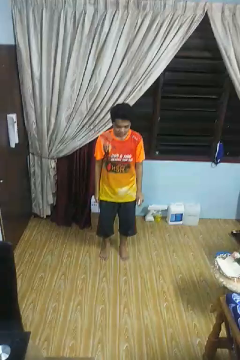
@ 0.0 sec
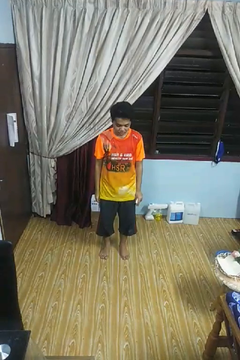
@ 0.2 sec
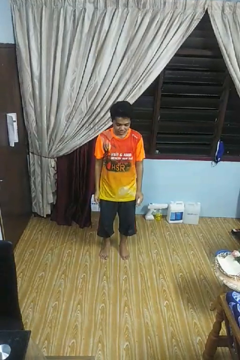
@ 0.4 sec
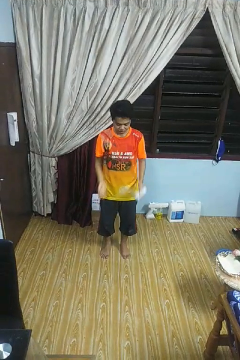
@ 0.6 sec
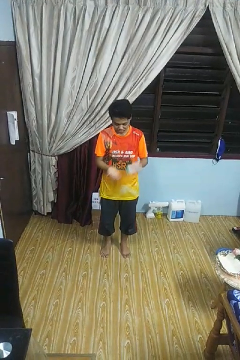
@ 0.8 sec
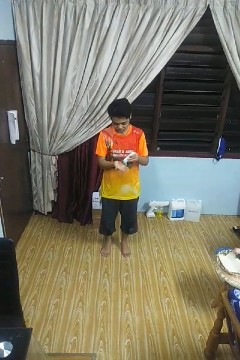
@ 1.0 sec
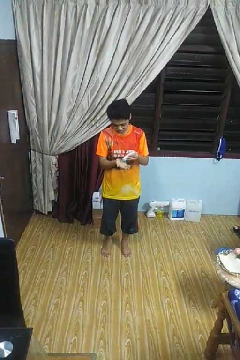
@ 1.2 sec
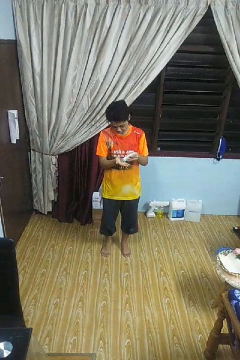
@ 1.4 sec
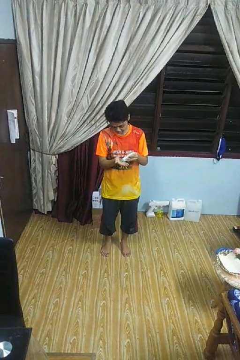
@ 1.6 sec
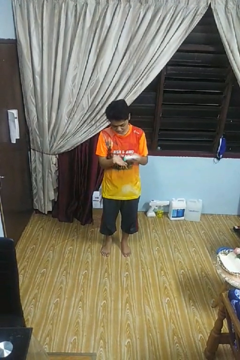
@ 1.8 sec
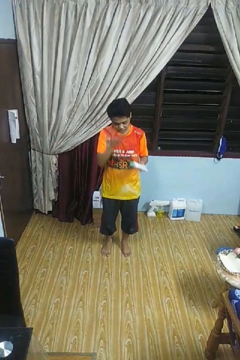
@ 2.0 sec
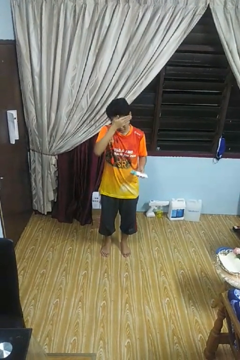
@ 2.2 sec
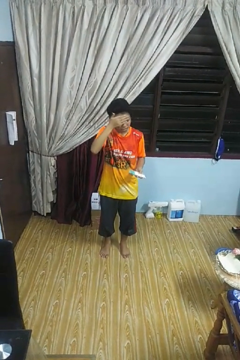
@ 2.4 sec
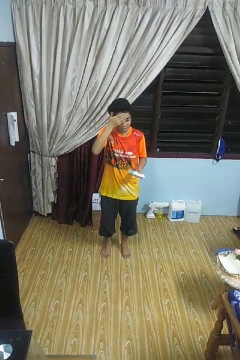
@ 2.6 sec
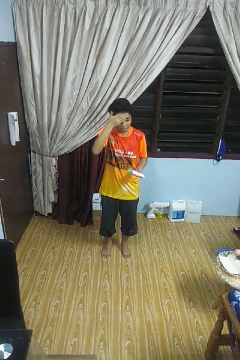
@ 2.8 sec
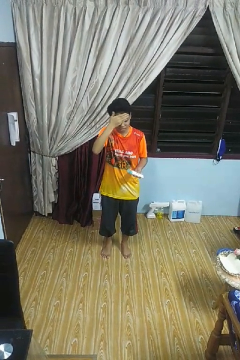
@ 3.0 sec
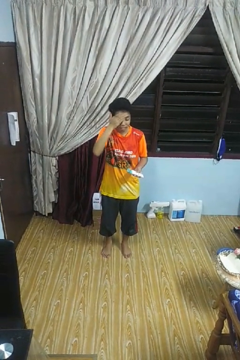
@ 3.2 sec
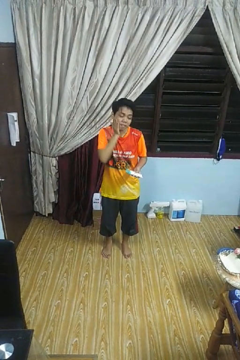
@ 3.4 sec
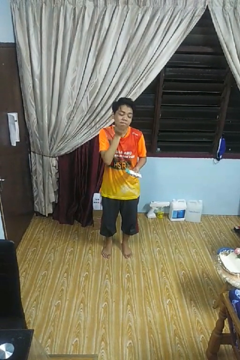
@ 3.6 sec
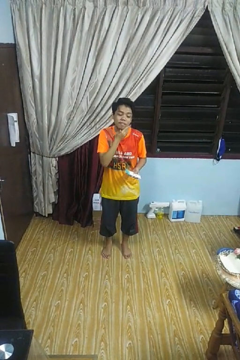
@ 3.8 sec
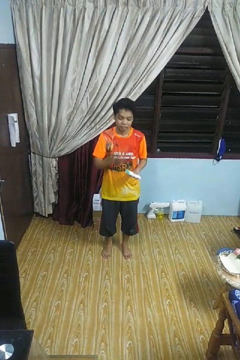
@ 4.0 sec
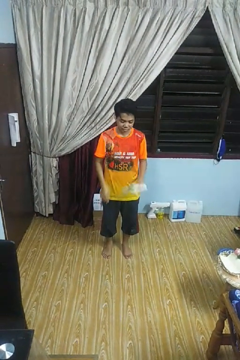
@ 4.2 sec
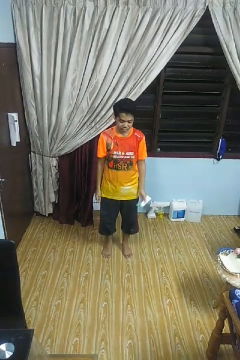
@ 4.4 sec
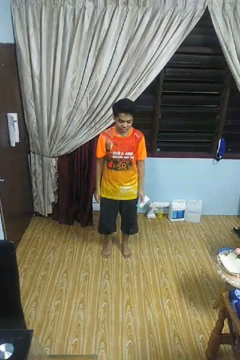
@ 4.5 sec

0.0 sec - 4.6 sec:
person applies facial moisturizer

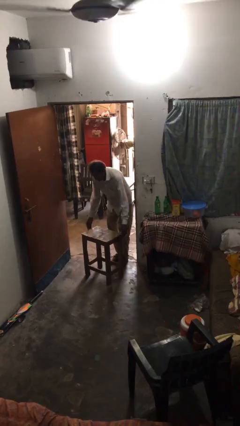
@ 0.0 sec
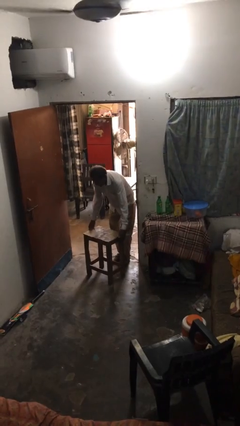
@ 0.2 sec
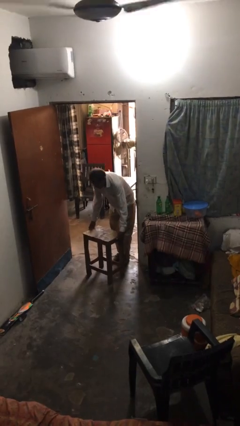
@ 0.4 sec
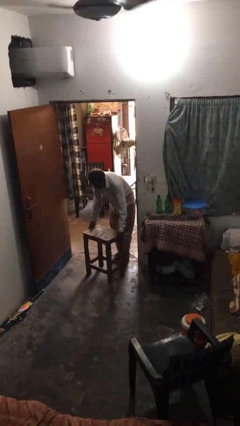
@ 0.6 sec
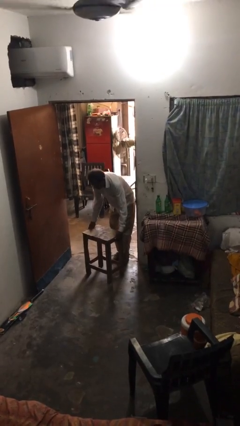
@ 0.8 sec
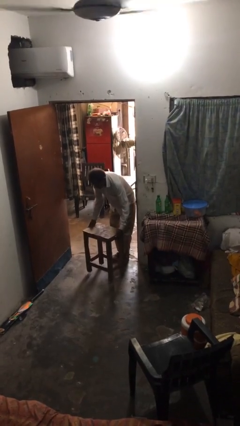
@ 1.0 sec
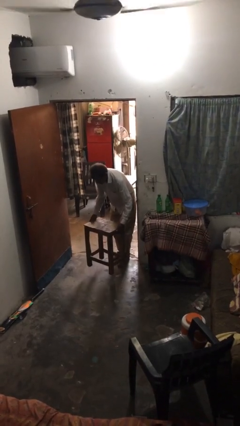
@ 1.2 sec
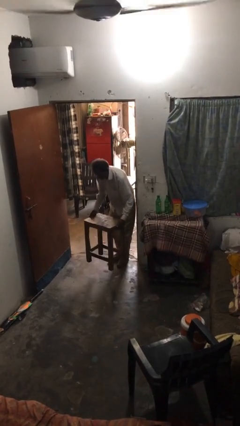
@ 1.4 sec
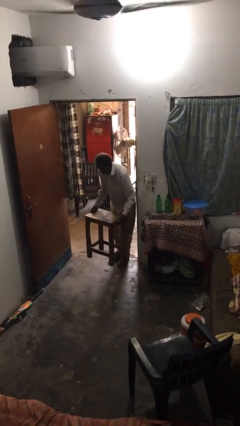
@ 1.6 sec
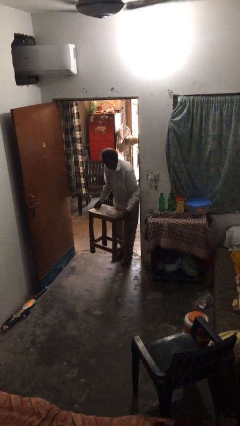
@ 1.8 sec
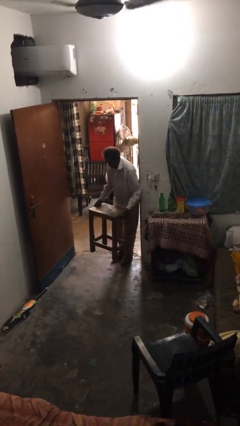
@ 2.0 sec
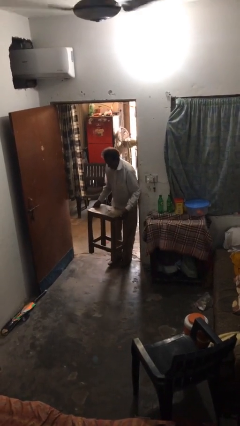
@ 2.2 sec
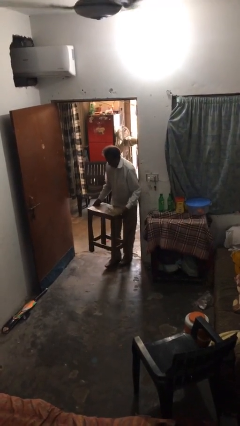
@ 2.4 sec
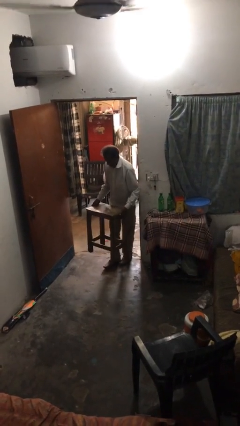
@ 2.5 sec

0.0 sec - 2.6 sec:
person picks up object from floor

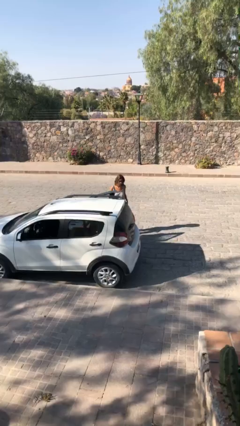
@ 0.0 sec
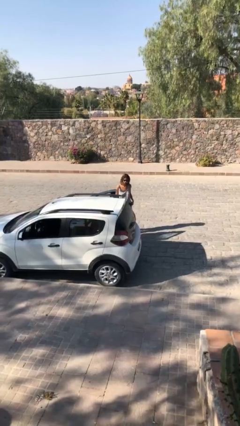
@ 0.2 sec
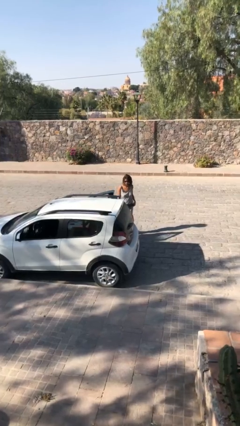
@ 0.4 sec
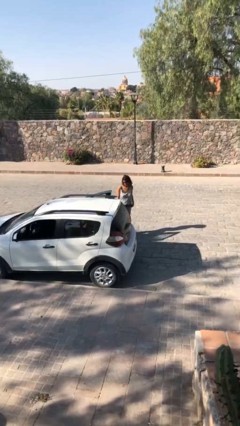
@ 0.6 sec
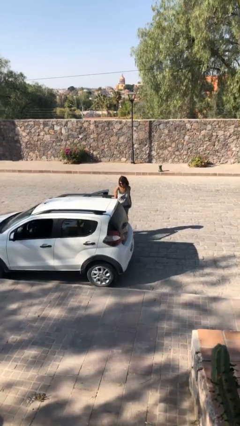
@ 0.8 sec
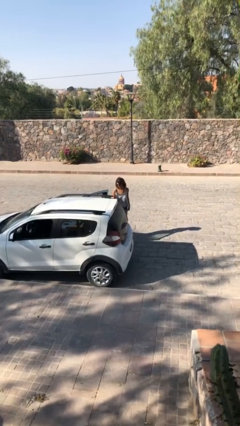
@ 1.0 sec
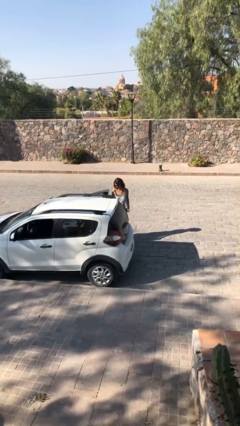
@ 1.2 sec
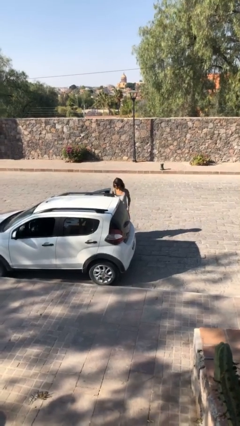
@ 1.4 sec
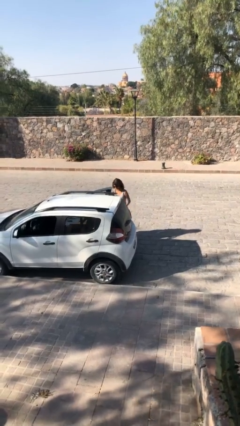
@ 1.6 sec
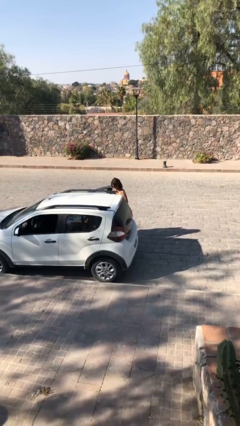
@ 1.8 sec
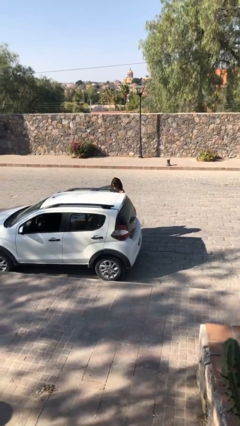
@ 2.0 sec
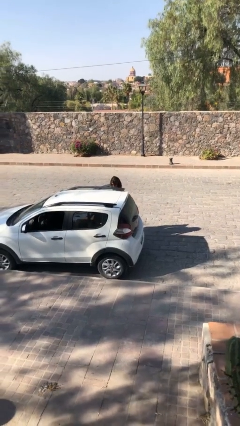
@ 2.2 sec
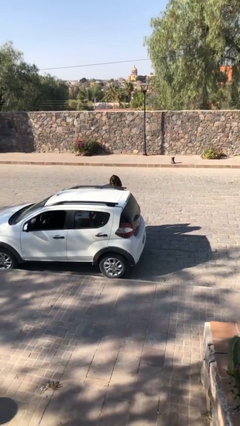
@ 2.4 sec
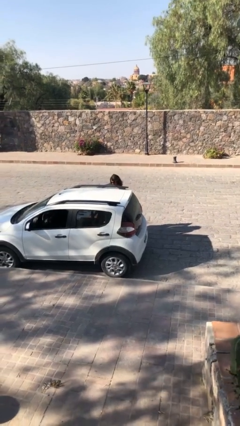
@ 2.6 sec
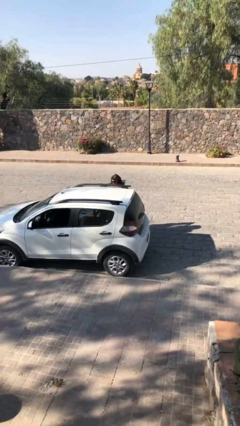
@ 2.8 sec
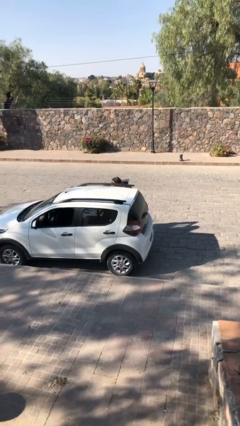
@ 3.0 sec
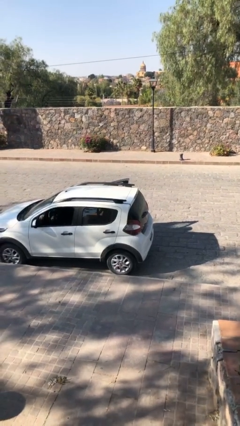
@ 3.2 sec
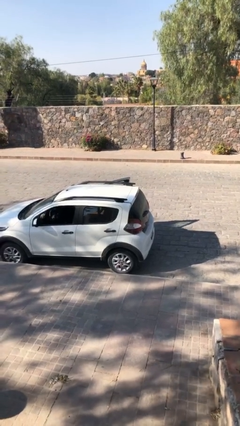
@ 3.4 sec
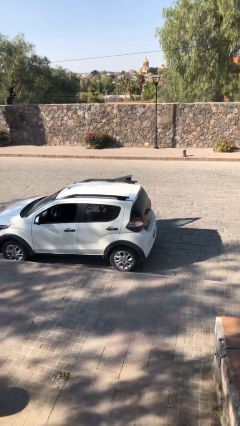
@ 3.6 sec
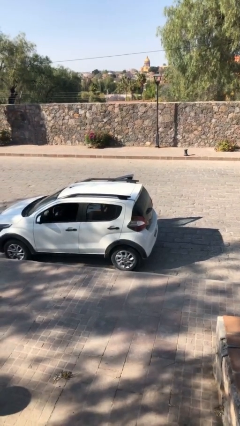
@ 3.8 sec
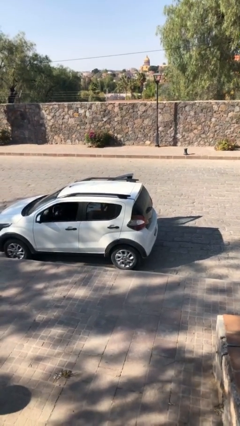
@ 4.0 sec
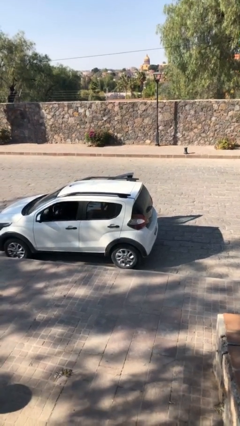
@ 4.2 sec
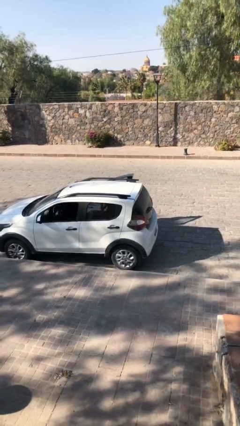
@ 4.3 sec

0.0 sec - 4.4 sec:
person enters car

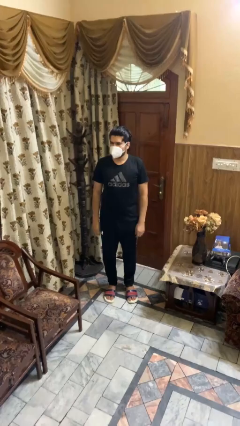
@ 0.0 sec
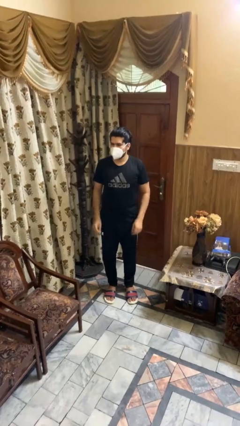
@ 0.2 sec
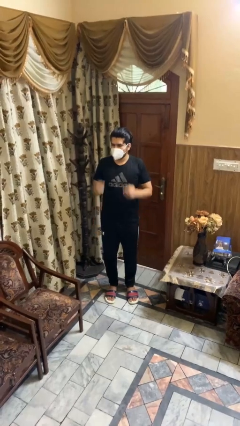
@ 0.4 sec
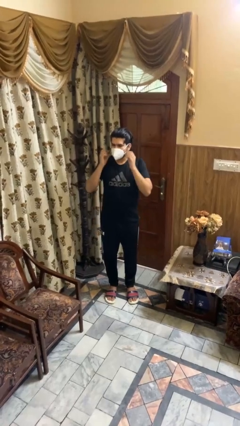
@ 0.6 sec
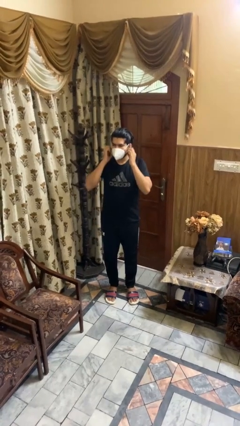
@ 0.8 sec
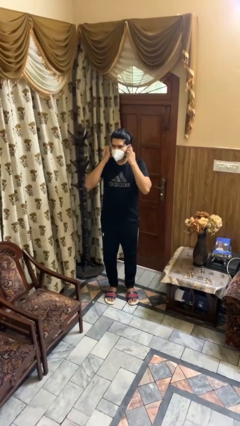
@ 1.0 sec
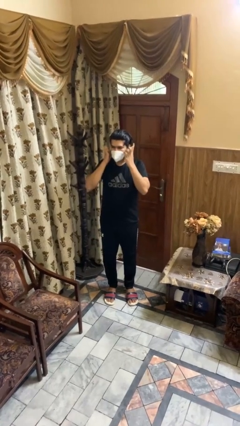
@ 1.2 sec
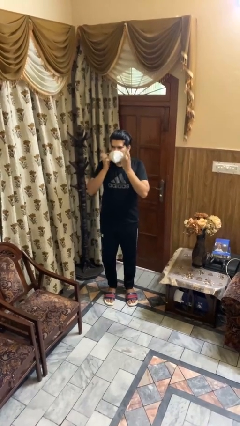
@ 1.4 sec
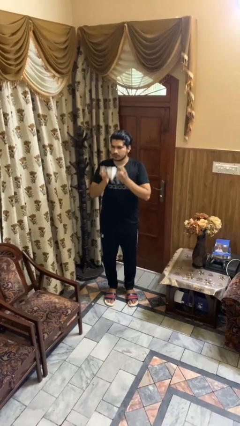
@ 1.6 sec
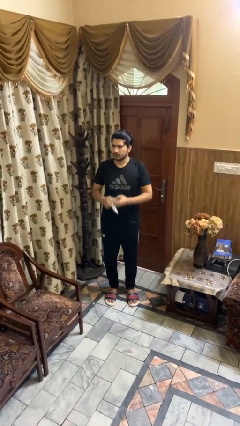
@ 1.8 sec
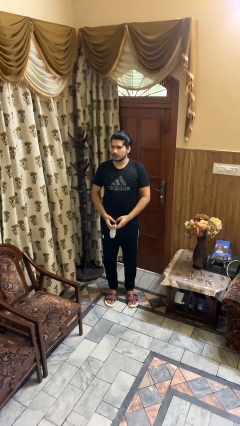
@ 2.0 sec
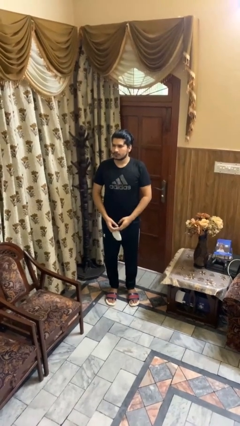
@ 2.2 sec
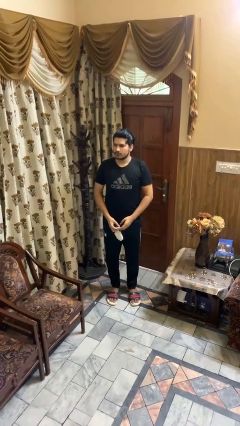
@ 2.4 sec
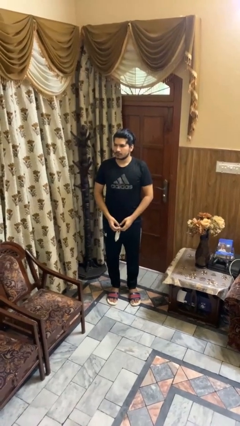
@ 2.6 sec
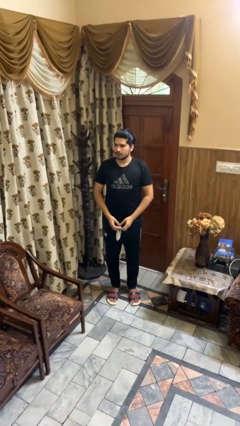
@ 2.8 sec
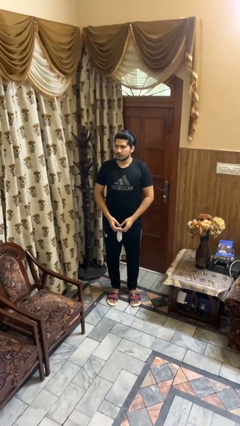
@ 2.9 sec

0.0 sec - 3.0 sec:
person takes off facemask

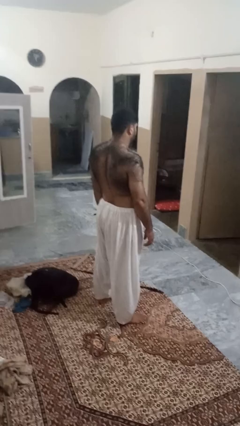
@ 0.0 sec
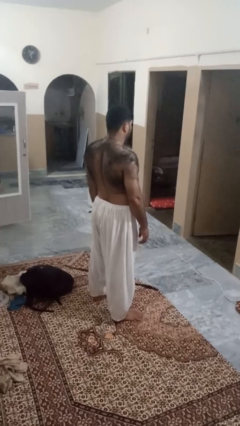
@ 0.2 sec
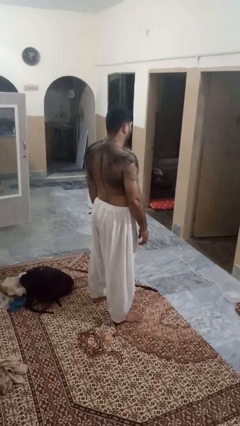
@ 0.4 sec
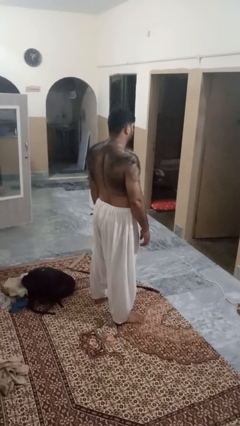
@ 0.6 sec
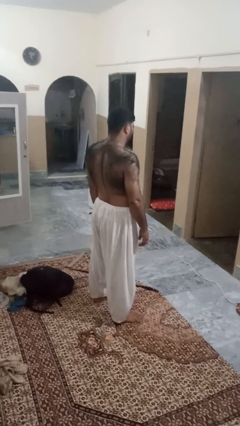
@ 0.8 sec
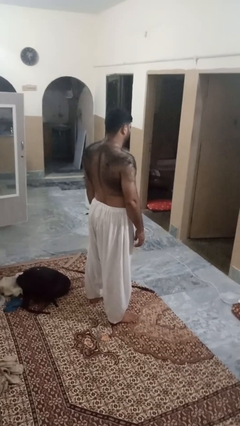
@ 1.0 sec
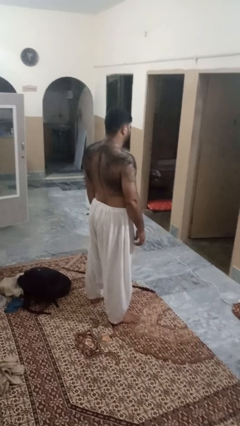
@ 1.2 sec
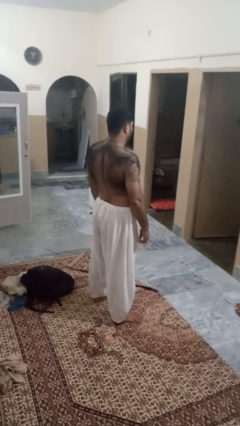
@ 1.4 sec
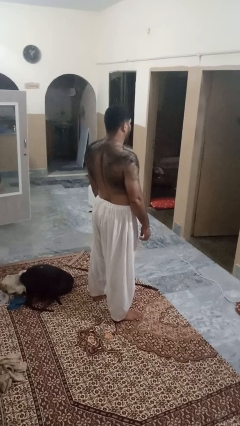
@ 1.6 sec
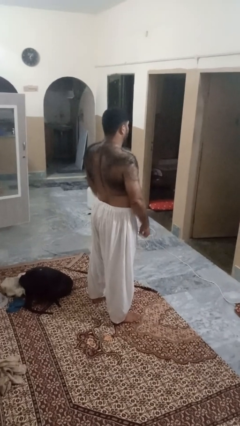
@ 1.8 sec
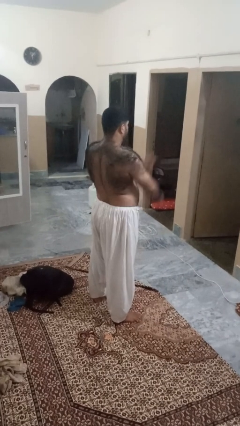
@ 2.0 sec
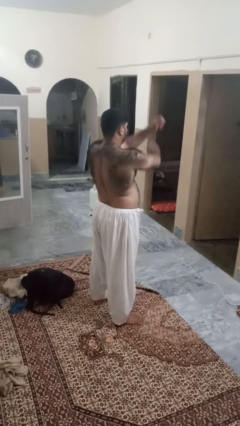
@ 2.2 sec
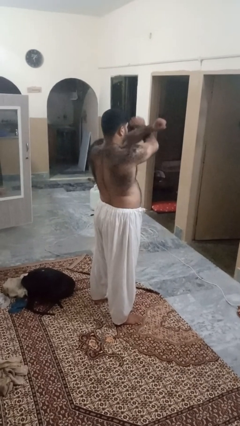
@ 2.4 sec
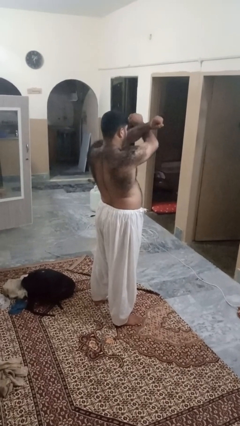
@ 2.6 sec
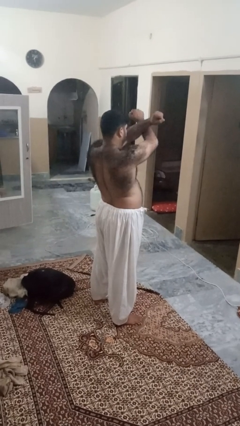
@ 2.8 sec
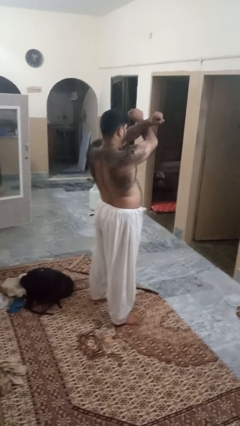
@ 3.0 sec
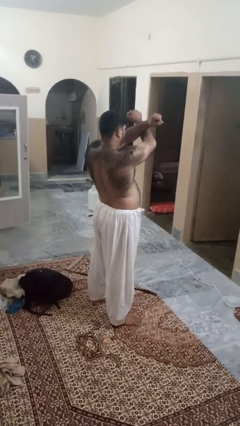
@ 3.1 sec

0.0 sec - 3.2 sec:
person gestures arms x

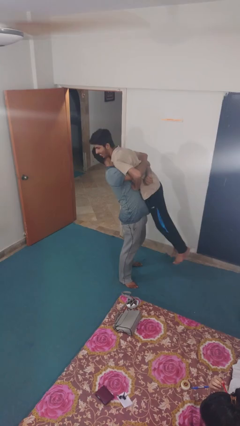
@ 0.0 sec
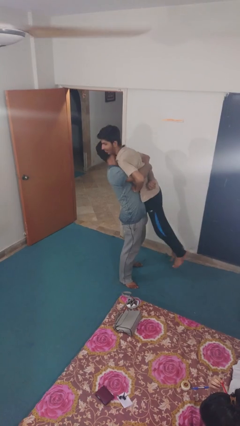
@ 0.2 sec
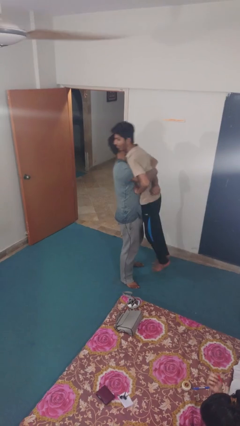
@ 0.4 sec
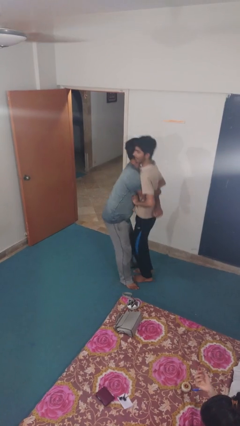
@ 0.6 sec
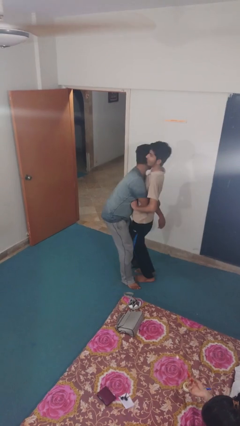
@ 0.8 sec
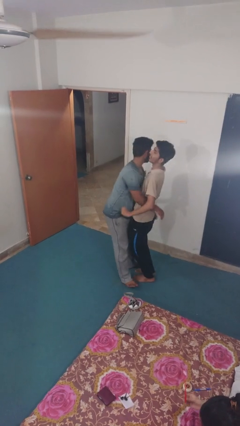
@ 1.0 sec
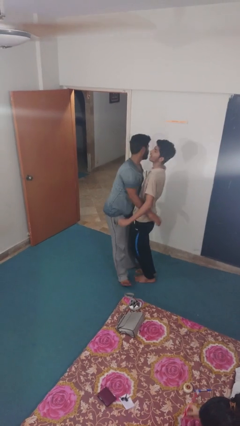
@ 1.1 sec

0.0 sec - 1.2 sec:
person puts down person
